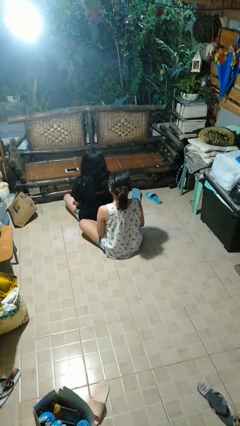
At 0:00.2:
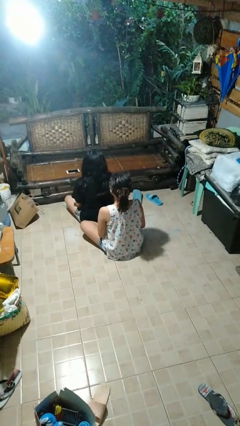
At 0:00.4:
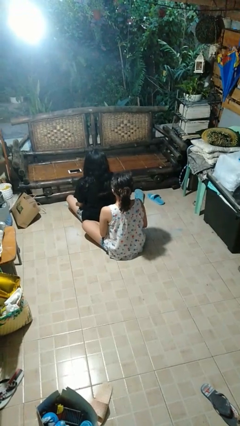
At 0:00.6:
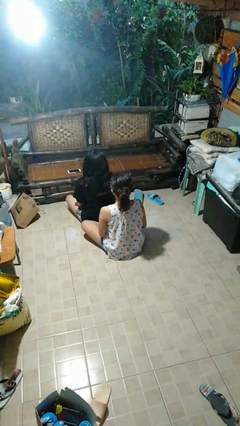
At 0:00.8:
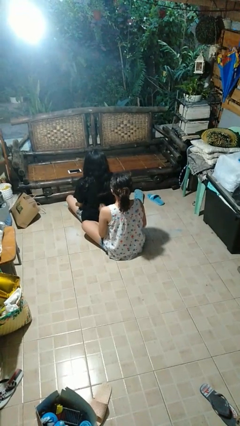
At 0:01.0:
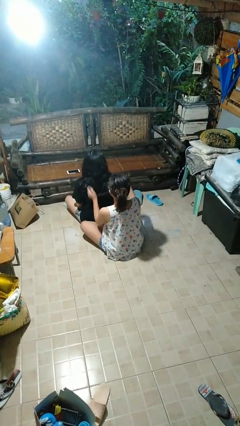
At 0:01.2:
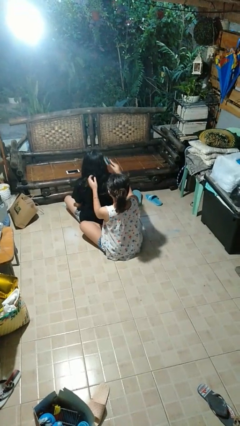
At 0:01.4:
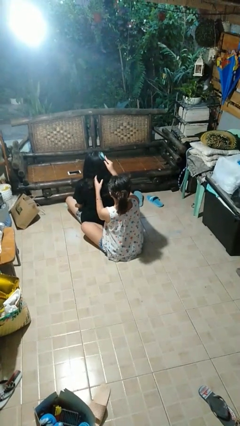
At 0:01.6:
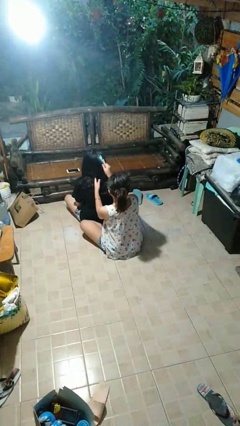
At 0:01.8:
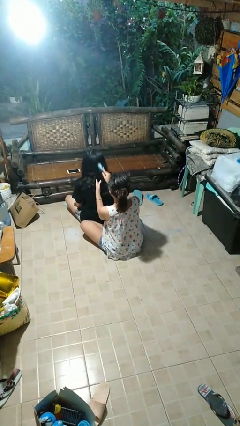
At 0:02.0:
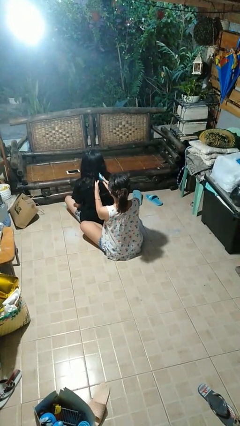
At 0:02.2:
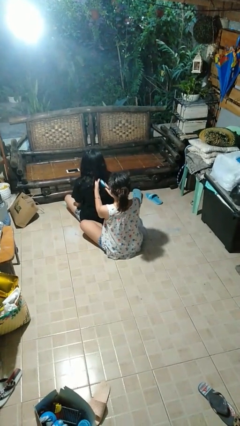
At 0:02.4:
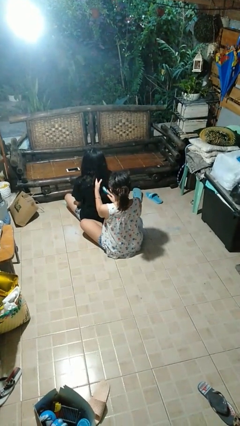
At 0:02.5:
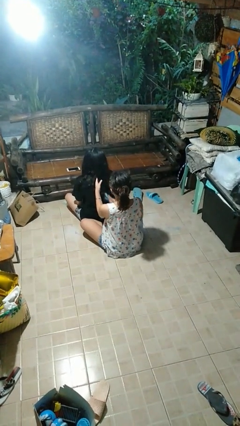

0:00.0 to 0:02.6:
person brushes hair of person

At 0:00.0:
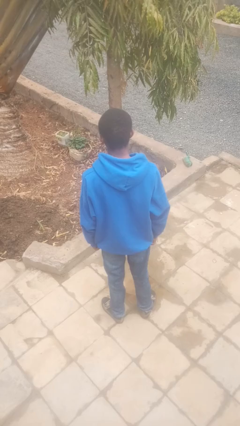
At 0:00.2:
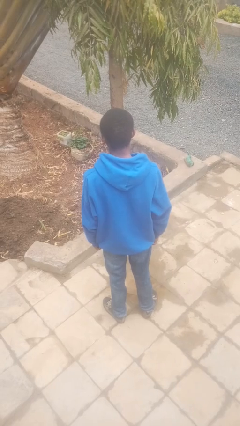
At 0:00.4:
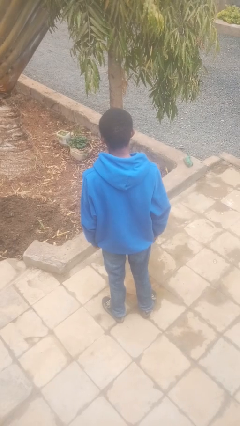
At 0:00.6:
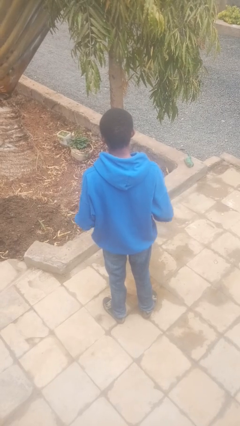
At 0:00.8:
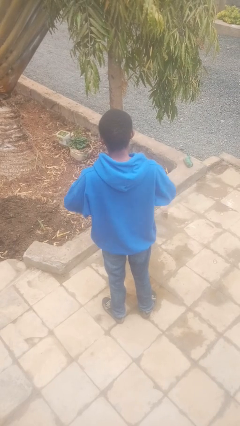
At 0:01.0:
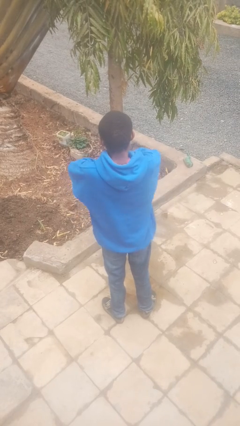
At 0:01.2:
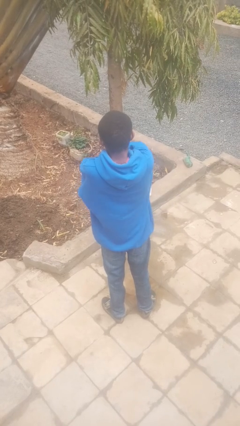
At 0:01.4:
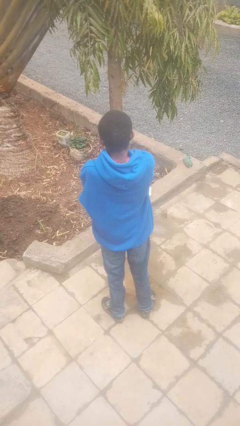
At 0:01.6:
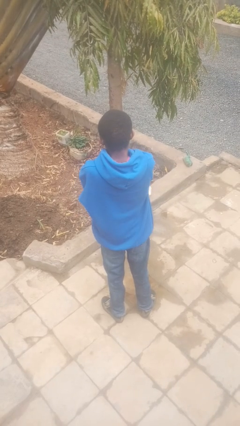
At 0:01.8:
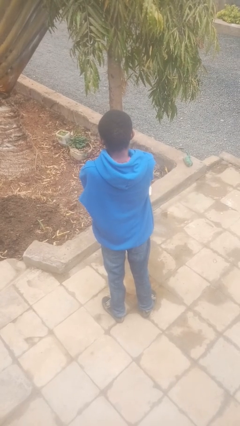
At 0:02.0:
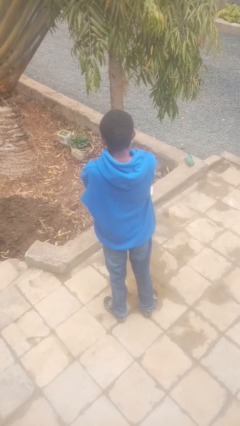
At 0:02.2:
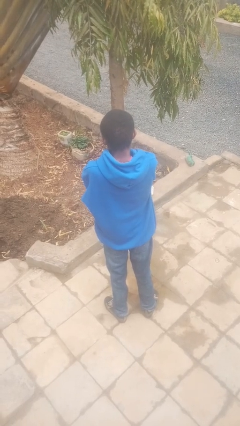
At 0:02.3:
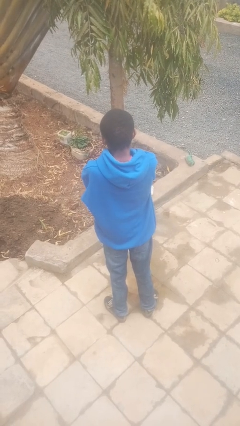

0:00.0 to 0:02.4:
person crosses arms

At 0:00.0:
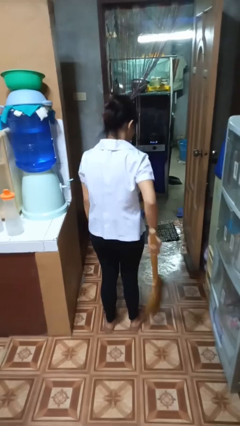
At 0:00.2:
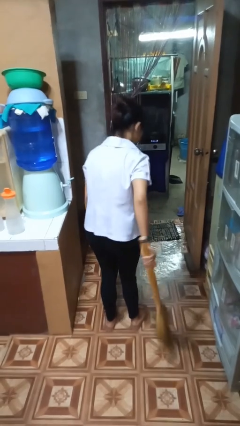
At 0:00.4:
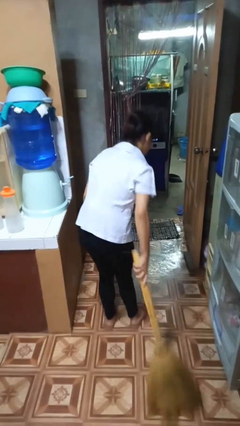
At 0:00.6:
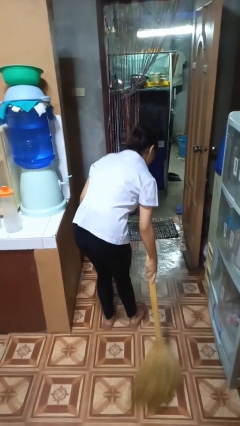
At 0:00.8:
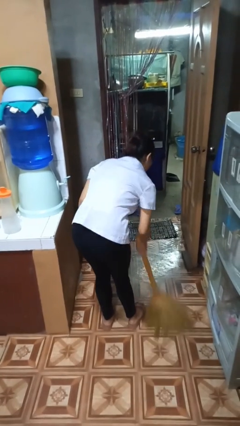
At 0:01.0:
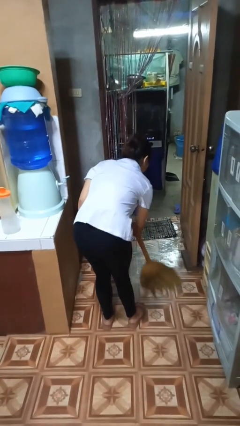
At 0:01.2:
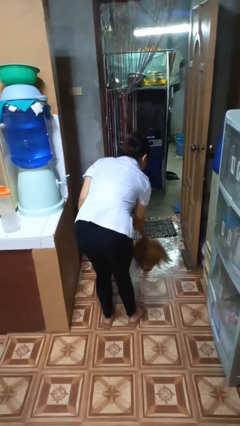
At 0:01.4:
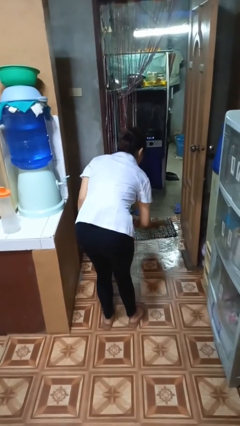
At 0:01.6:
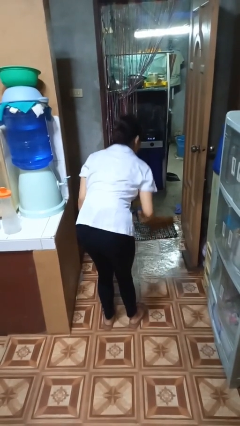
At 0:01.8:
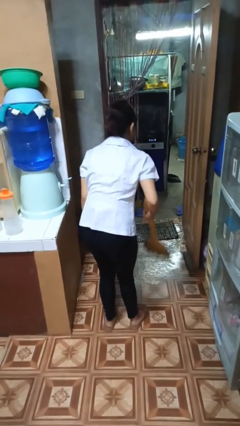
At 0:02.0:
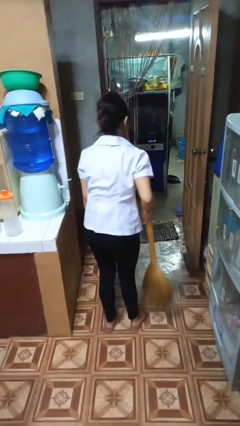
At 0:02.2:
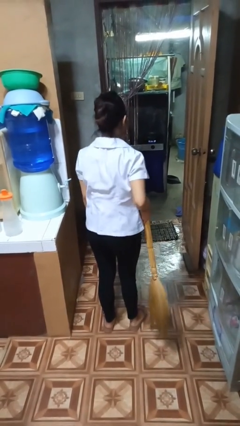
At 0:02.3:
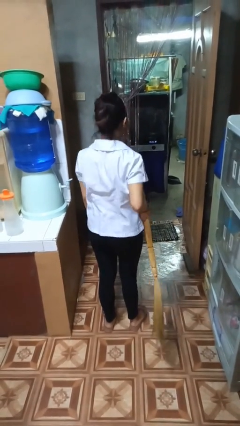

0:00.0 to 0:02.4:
person sweeps floor

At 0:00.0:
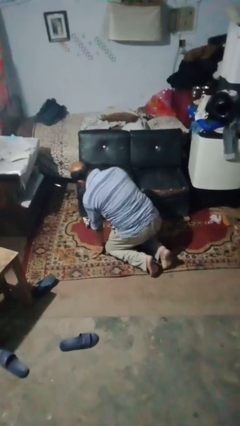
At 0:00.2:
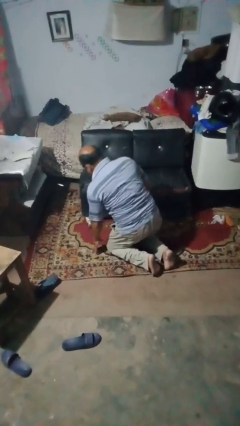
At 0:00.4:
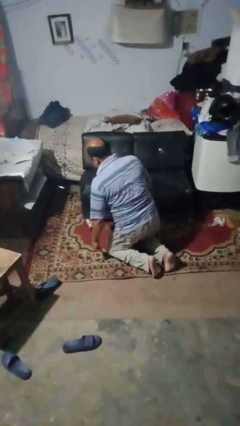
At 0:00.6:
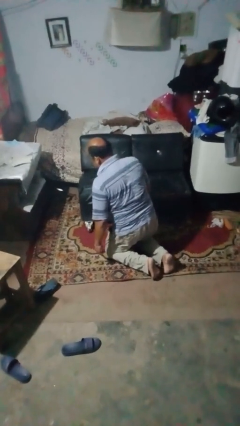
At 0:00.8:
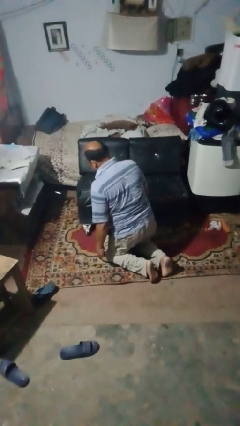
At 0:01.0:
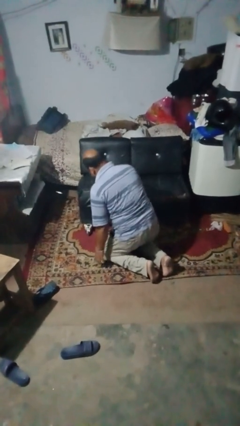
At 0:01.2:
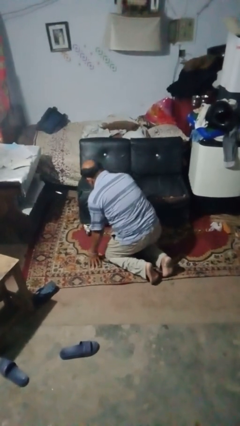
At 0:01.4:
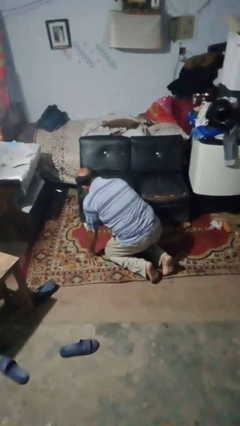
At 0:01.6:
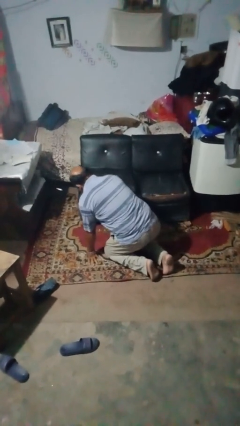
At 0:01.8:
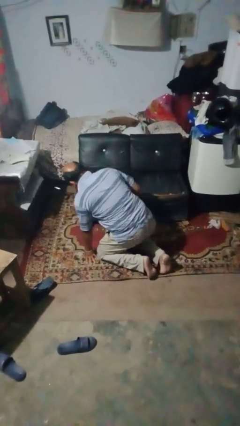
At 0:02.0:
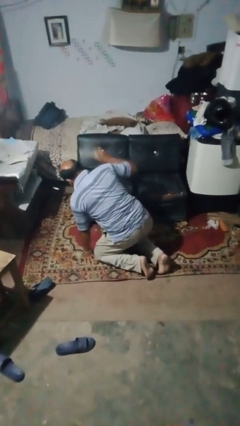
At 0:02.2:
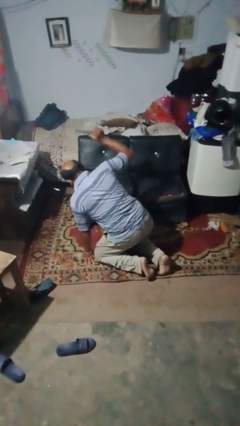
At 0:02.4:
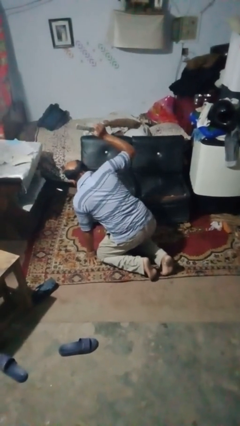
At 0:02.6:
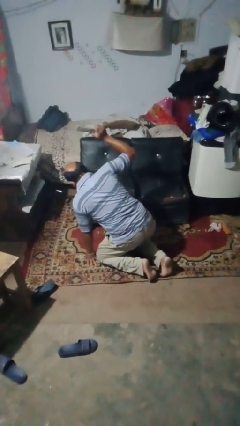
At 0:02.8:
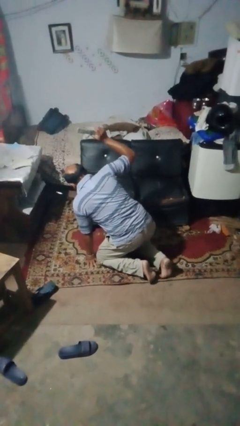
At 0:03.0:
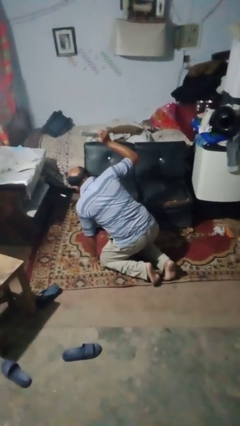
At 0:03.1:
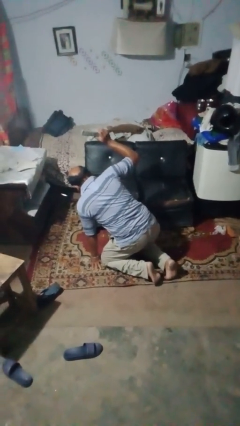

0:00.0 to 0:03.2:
person searches under couch

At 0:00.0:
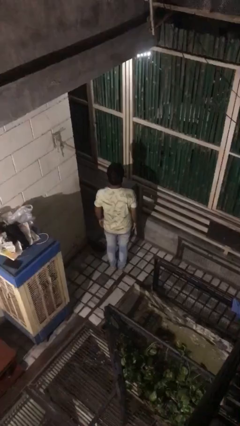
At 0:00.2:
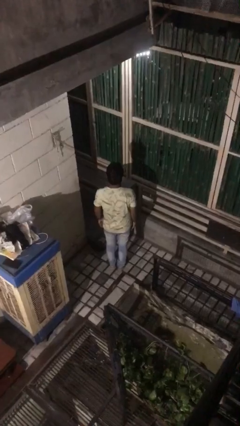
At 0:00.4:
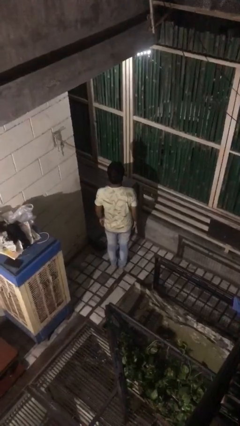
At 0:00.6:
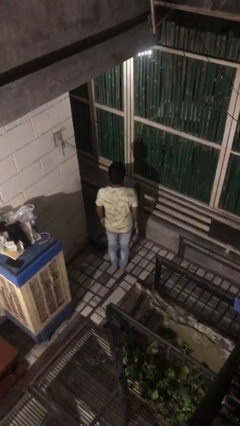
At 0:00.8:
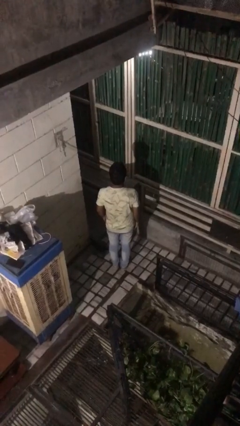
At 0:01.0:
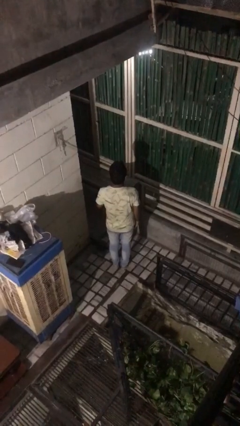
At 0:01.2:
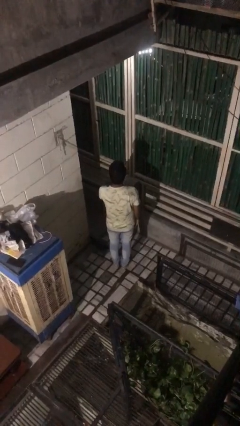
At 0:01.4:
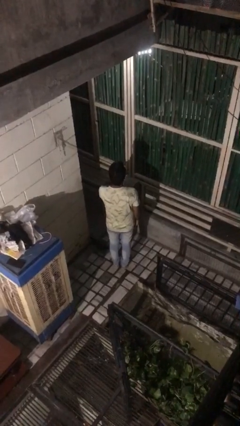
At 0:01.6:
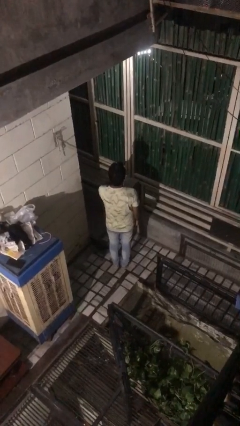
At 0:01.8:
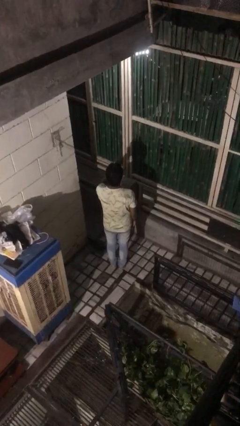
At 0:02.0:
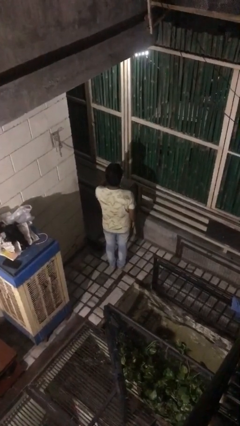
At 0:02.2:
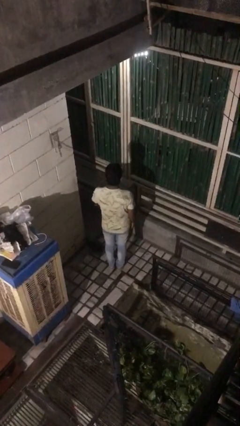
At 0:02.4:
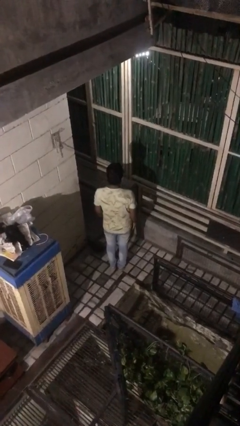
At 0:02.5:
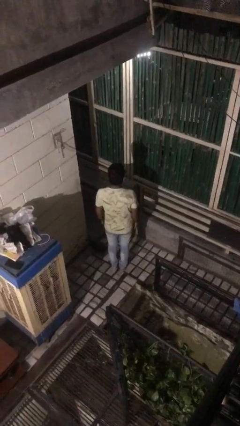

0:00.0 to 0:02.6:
person gestures blow kiss

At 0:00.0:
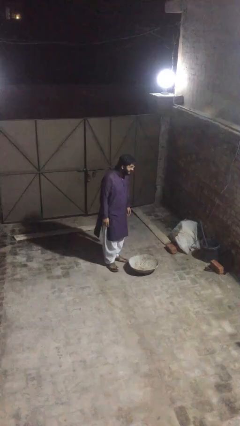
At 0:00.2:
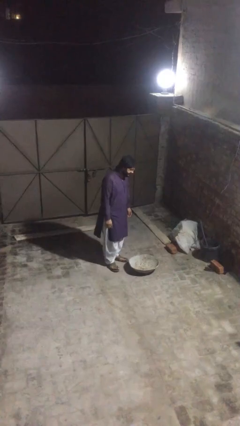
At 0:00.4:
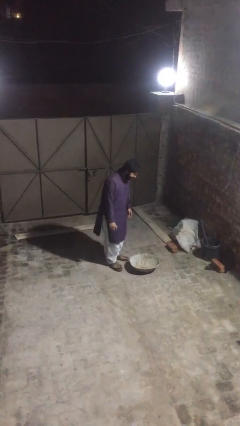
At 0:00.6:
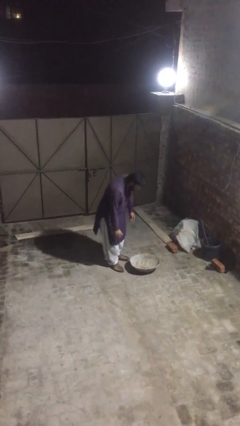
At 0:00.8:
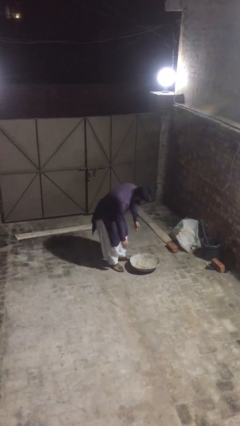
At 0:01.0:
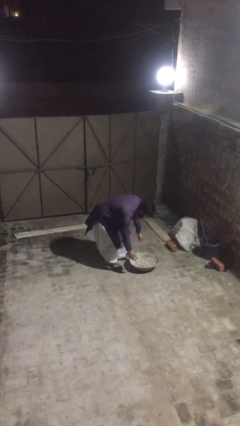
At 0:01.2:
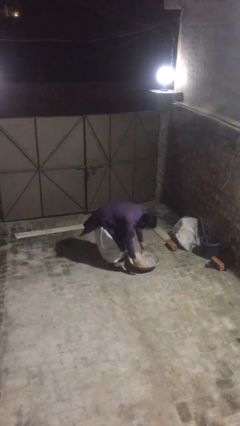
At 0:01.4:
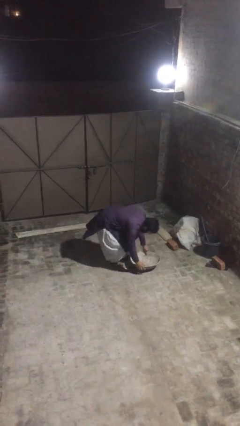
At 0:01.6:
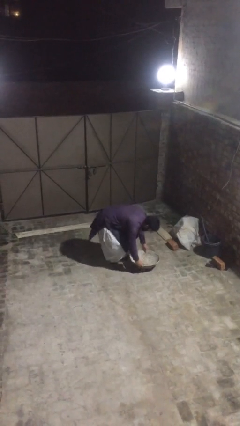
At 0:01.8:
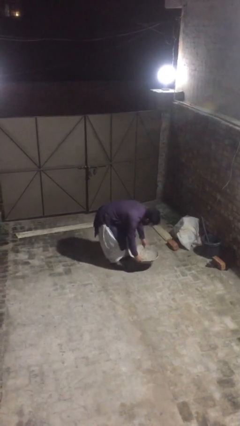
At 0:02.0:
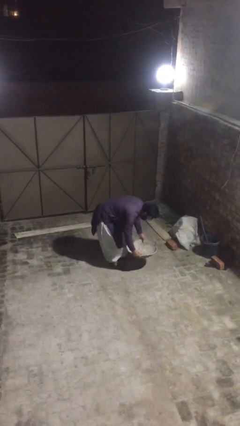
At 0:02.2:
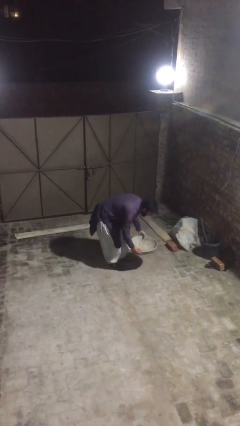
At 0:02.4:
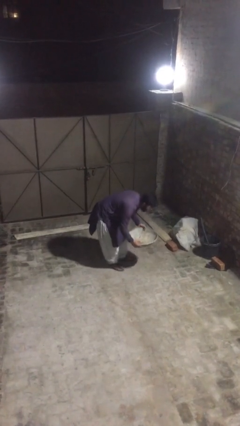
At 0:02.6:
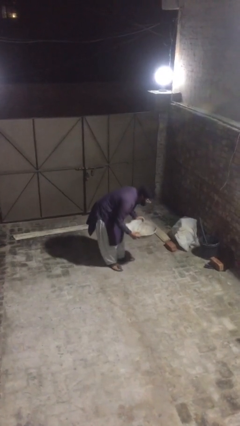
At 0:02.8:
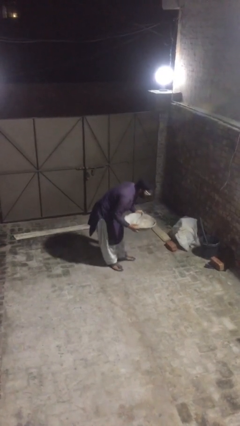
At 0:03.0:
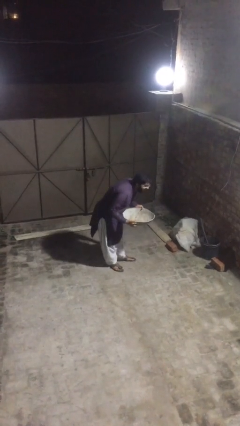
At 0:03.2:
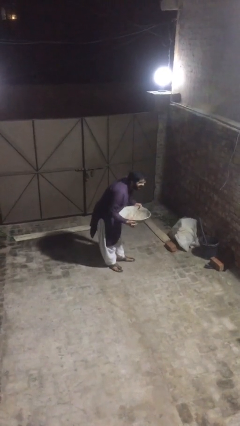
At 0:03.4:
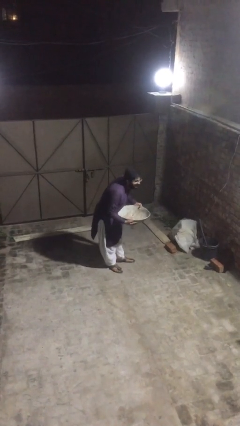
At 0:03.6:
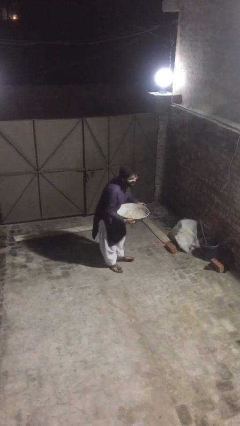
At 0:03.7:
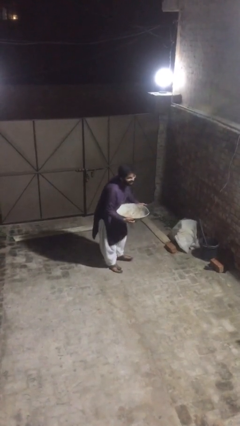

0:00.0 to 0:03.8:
person picks up object from floor
